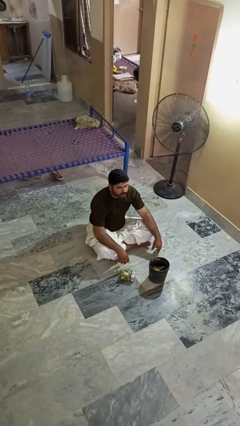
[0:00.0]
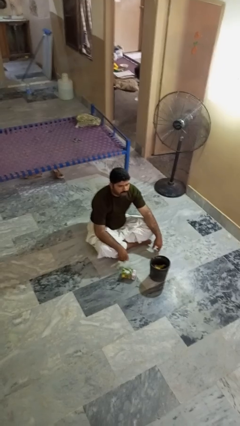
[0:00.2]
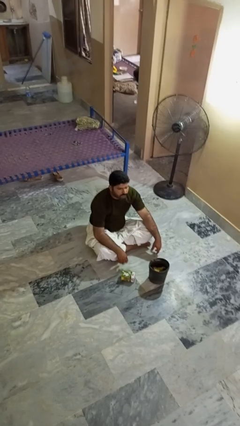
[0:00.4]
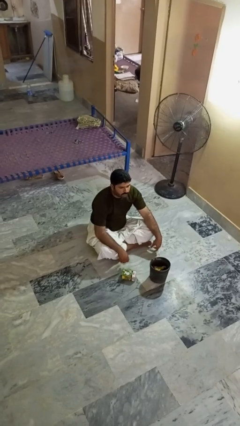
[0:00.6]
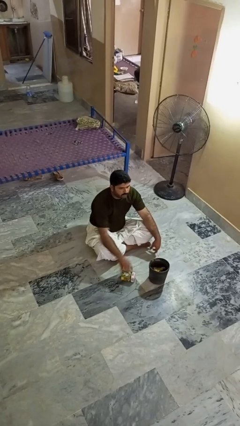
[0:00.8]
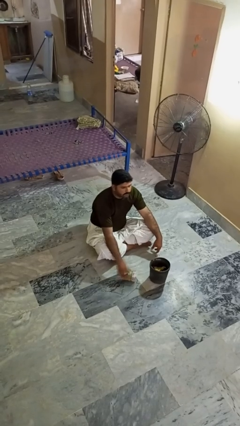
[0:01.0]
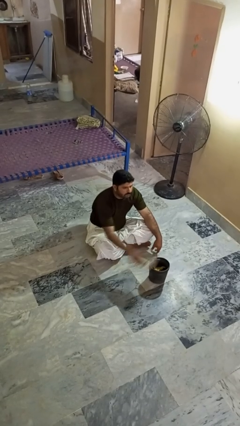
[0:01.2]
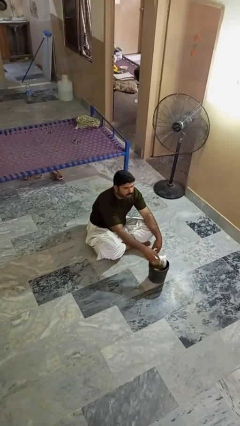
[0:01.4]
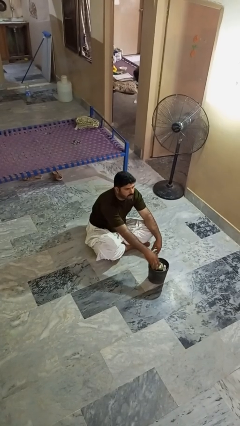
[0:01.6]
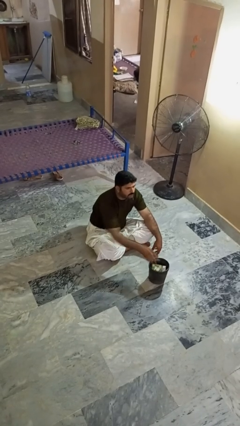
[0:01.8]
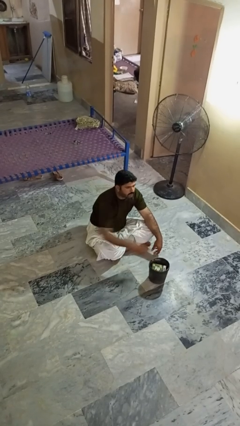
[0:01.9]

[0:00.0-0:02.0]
person puts object into basket

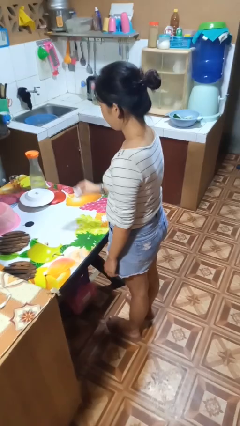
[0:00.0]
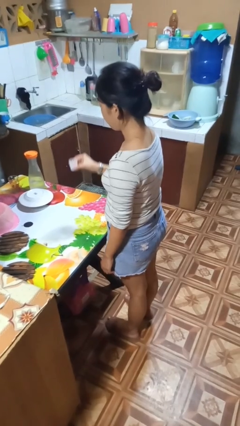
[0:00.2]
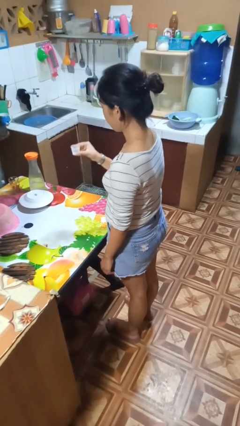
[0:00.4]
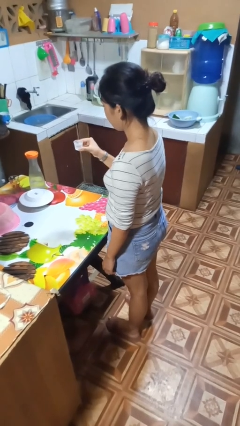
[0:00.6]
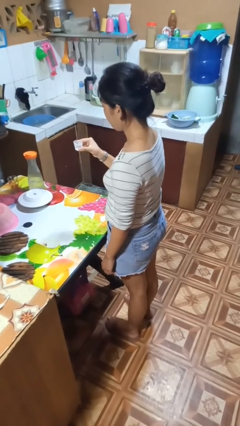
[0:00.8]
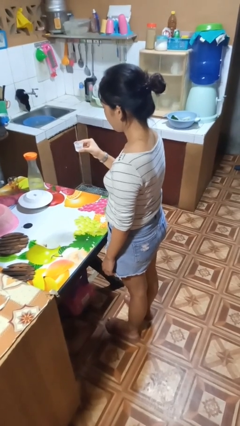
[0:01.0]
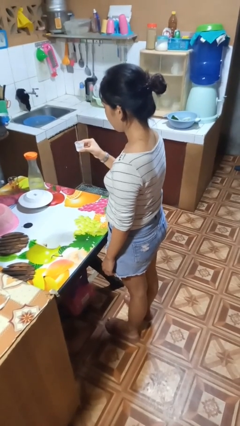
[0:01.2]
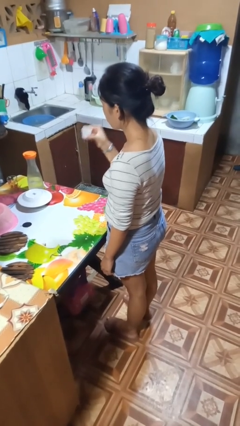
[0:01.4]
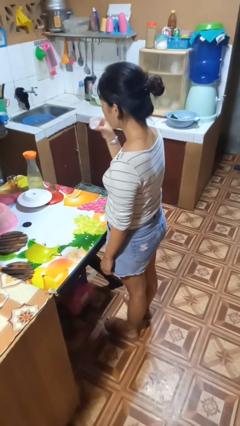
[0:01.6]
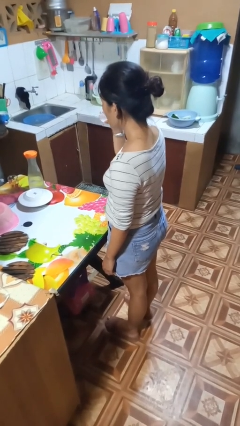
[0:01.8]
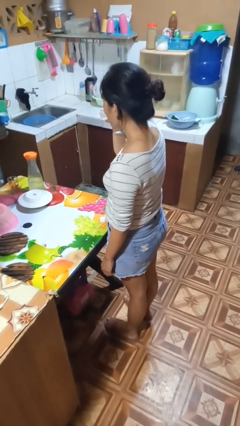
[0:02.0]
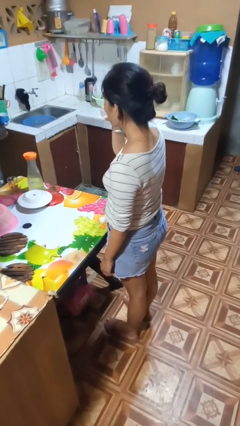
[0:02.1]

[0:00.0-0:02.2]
person picks up object from table

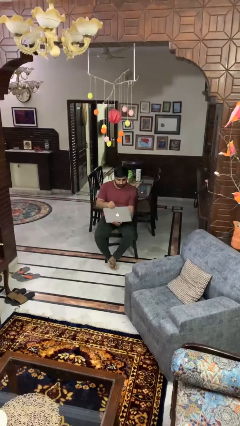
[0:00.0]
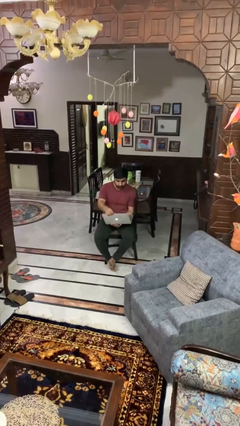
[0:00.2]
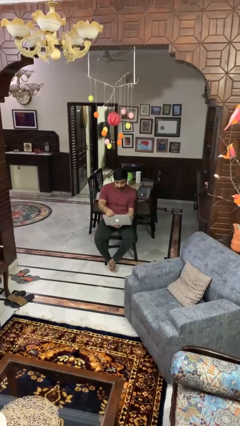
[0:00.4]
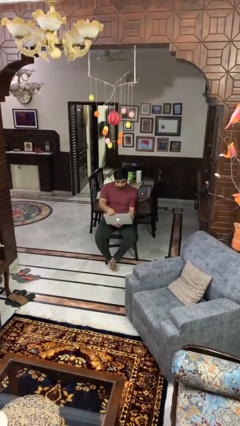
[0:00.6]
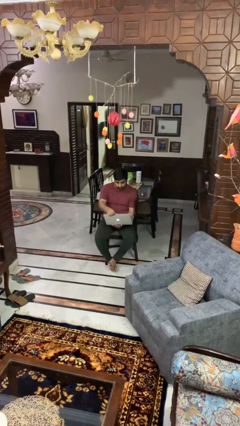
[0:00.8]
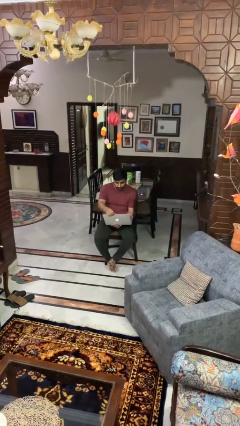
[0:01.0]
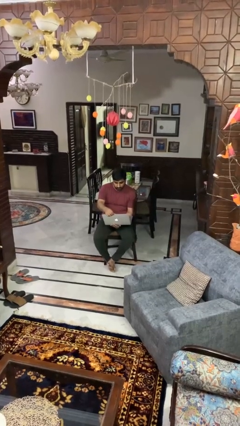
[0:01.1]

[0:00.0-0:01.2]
person opens laptop

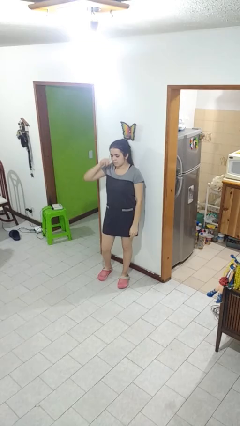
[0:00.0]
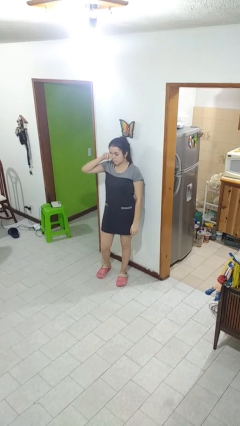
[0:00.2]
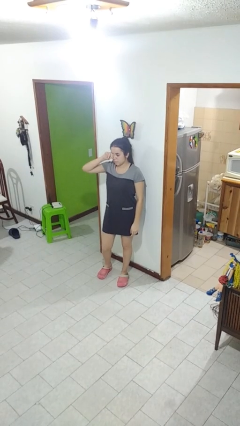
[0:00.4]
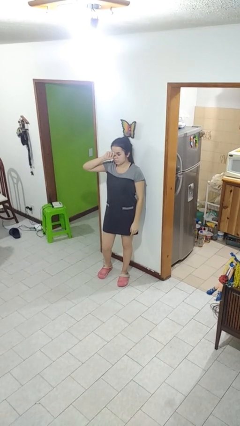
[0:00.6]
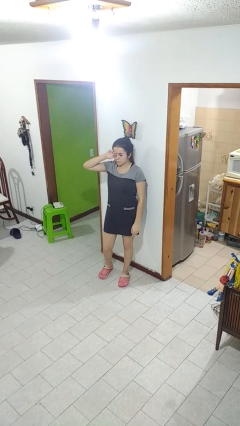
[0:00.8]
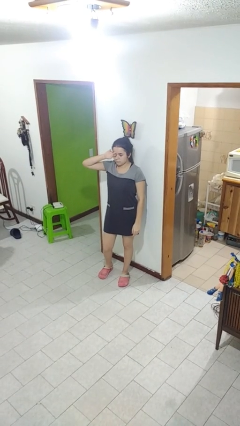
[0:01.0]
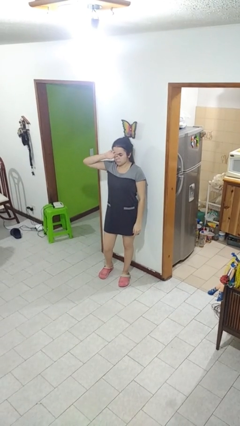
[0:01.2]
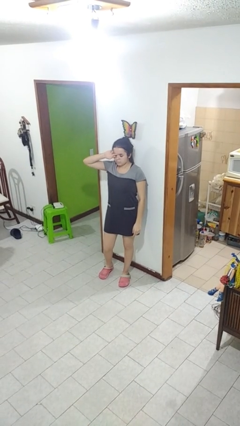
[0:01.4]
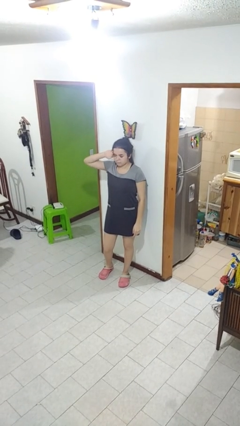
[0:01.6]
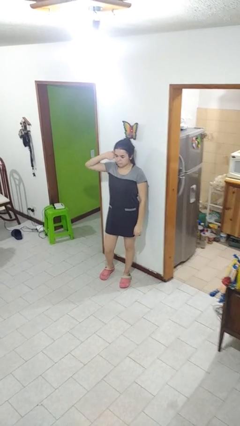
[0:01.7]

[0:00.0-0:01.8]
person rubs eyes

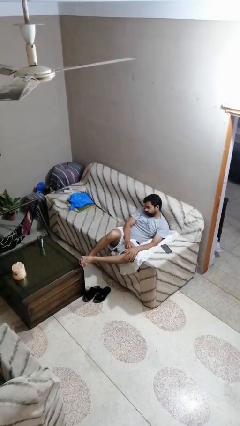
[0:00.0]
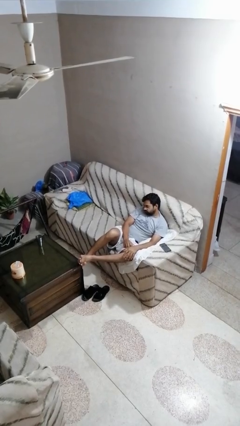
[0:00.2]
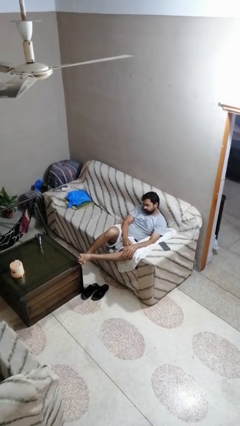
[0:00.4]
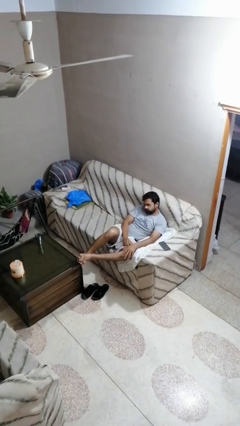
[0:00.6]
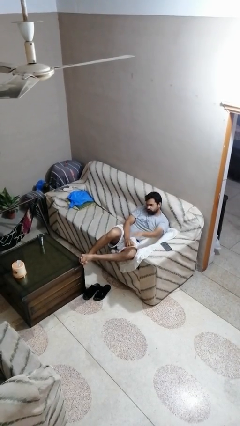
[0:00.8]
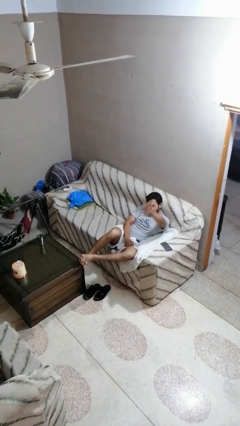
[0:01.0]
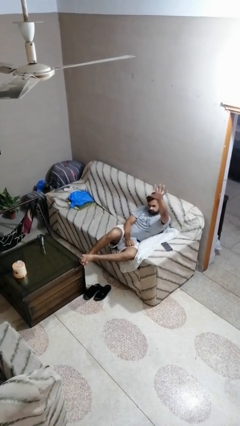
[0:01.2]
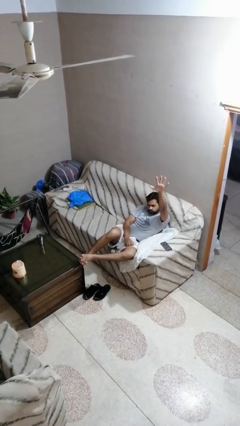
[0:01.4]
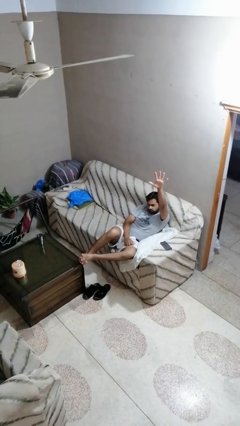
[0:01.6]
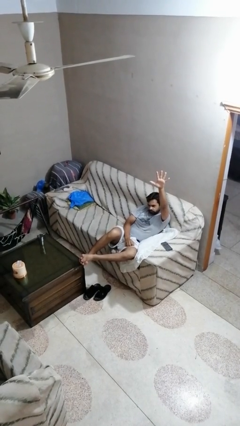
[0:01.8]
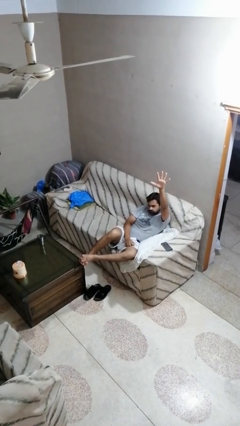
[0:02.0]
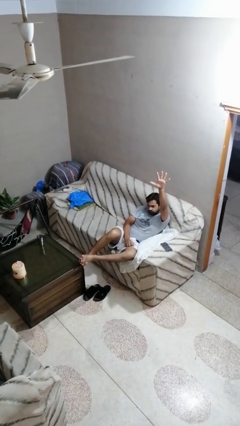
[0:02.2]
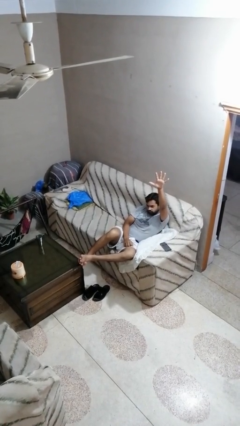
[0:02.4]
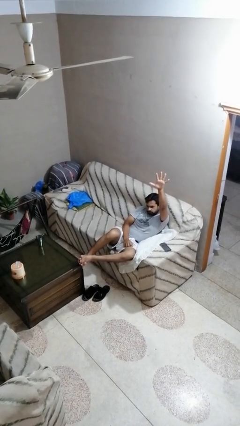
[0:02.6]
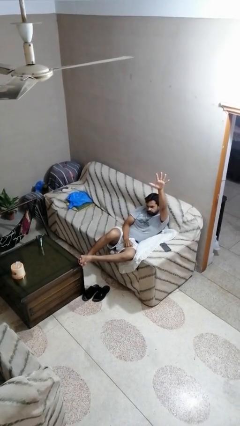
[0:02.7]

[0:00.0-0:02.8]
person gestures number five

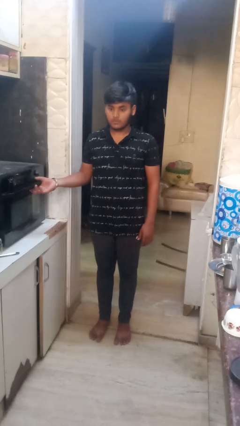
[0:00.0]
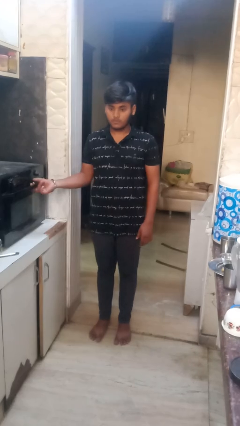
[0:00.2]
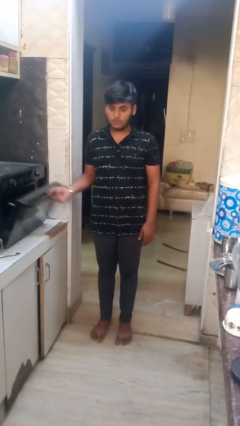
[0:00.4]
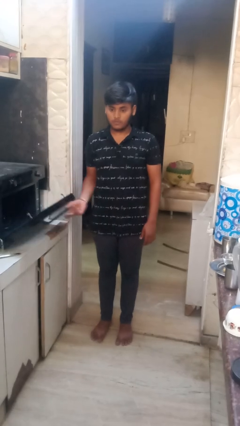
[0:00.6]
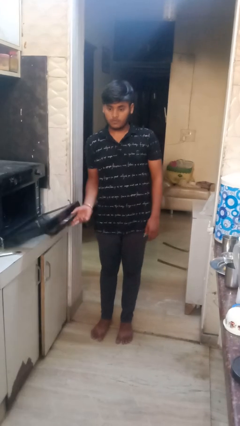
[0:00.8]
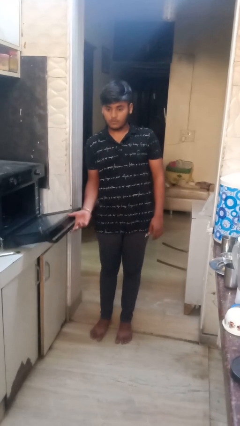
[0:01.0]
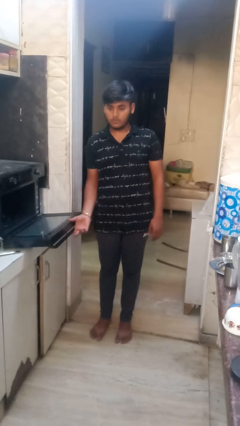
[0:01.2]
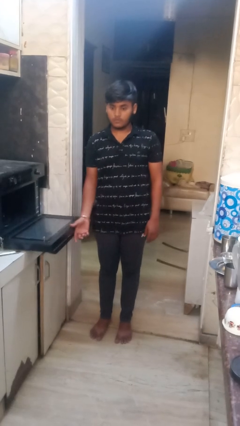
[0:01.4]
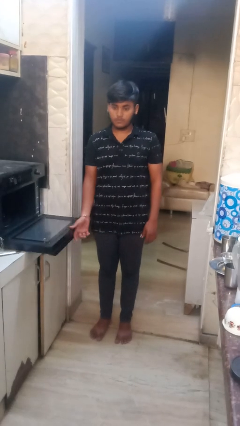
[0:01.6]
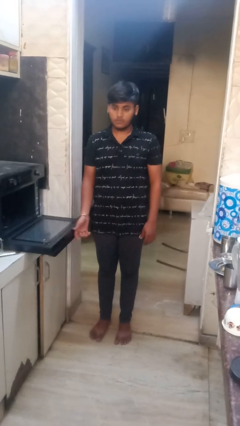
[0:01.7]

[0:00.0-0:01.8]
person opens oven door

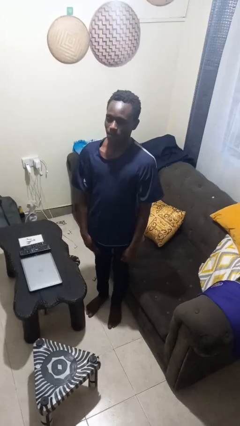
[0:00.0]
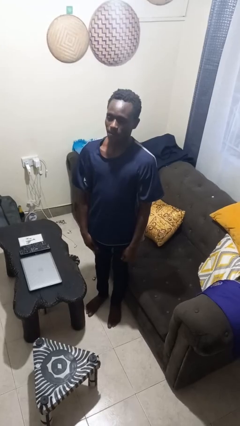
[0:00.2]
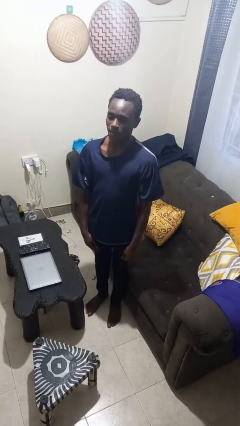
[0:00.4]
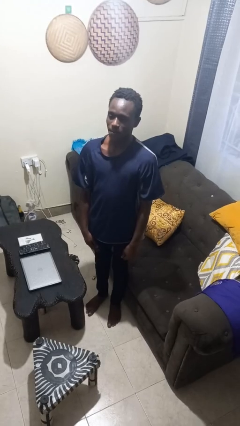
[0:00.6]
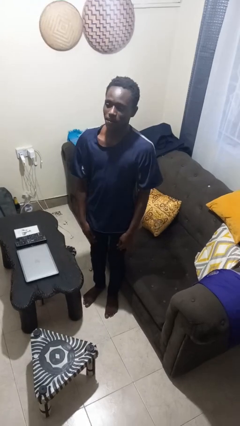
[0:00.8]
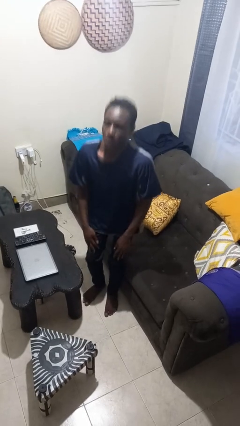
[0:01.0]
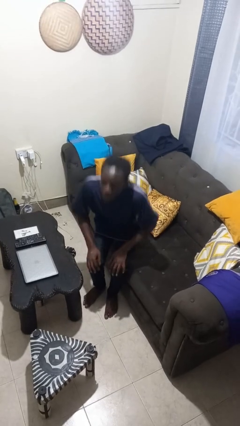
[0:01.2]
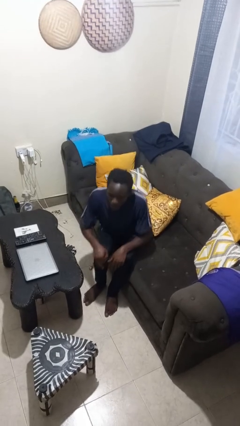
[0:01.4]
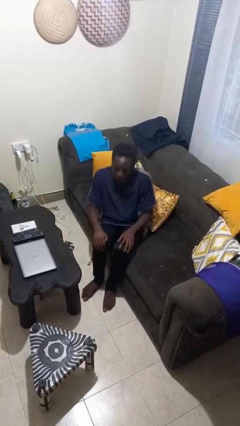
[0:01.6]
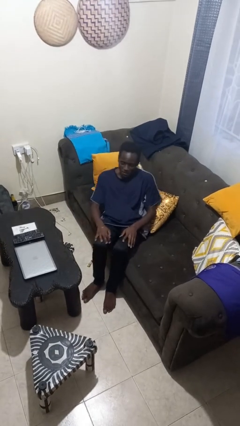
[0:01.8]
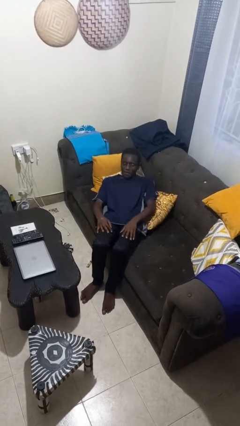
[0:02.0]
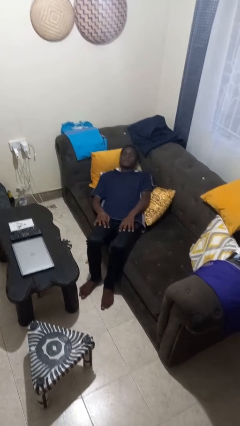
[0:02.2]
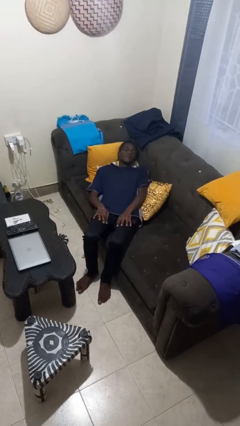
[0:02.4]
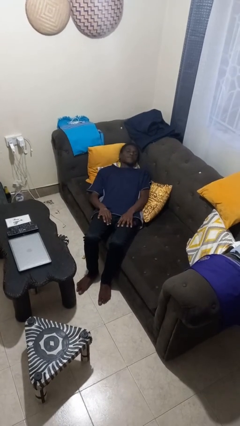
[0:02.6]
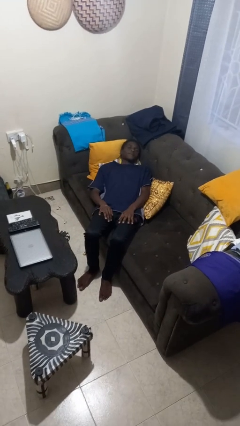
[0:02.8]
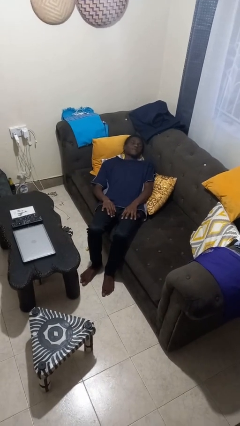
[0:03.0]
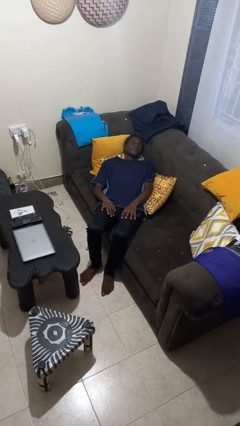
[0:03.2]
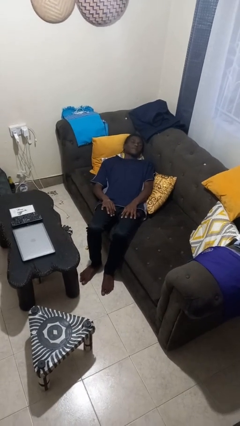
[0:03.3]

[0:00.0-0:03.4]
person lies down on couch

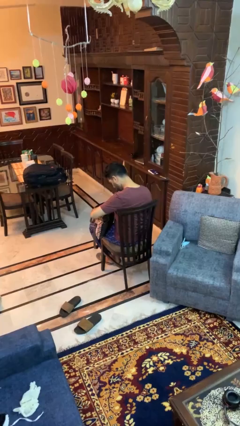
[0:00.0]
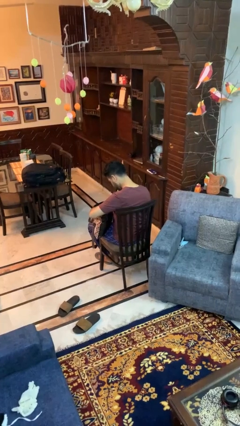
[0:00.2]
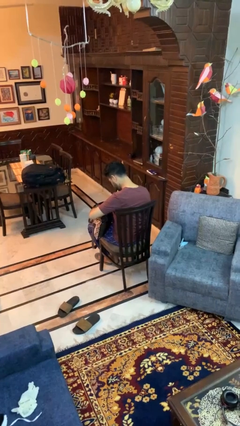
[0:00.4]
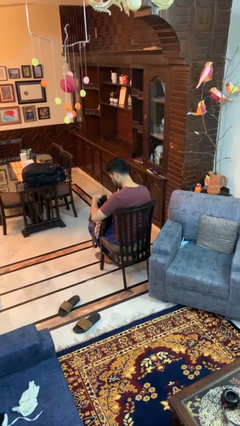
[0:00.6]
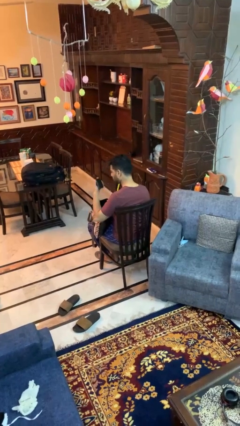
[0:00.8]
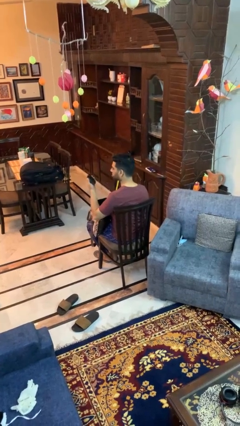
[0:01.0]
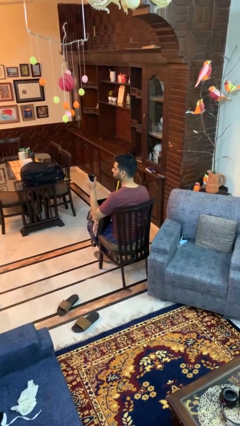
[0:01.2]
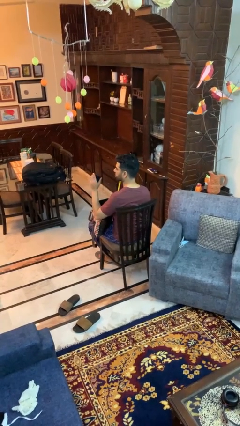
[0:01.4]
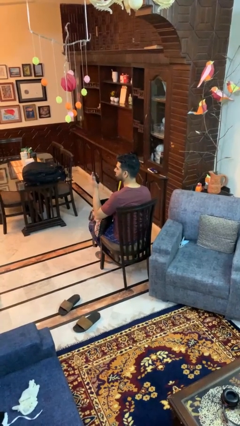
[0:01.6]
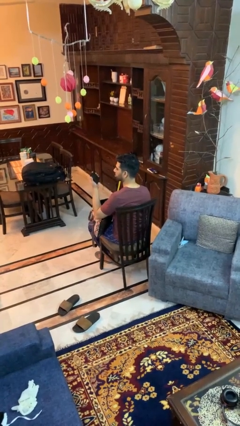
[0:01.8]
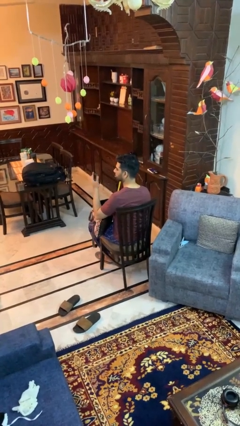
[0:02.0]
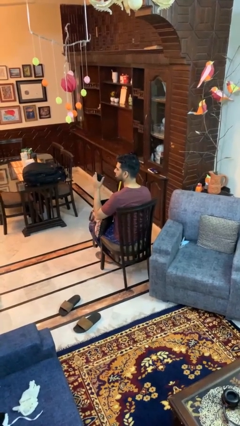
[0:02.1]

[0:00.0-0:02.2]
person takes object from purse
